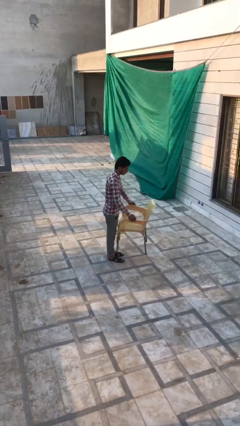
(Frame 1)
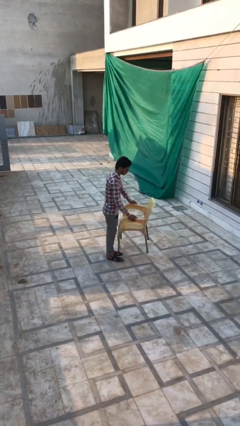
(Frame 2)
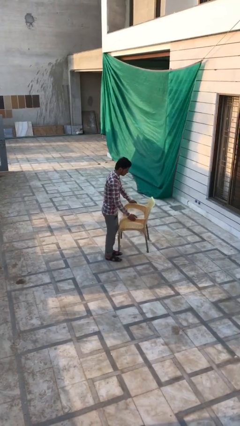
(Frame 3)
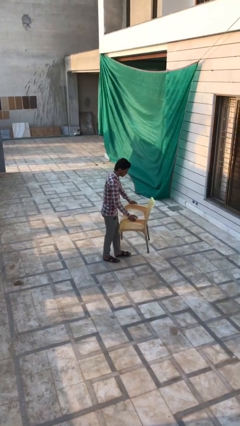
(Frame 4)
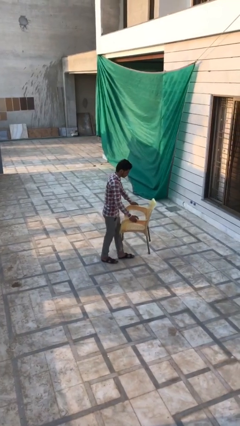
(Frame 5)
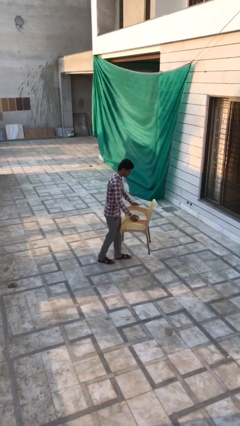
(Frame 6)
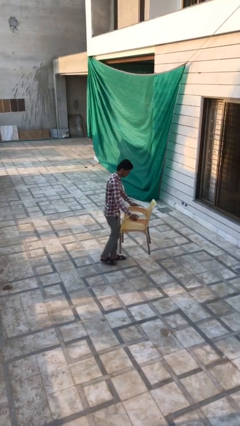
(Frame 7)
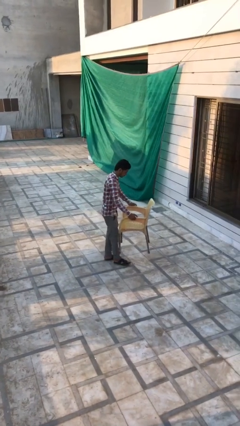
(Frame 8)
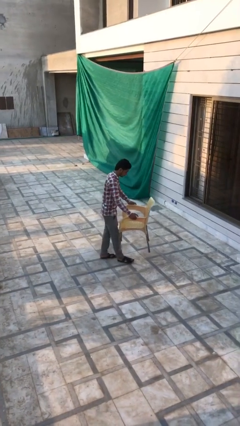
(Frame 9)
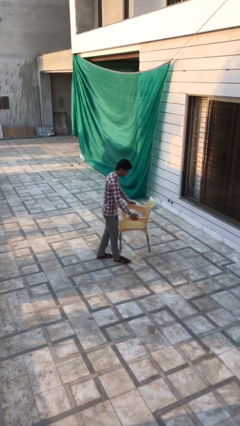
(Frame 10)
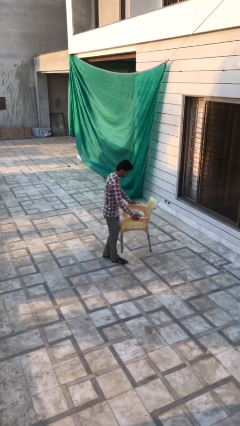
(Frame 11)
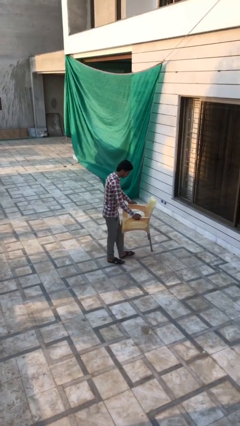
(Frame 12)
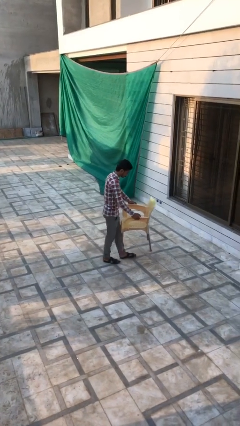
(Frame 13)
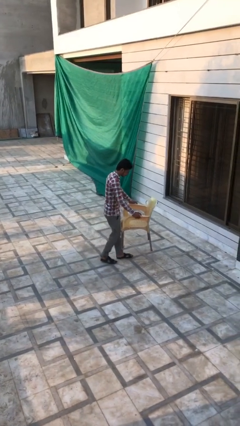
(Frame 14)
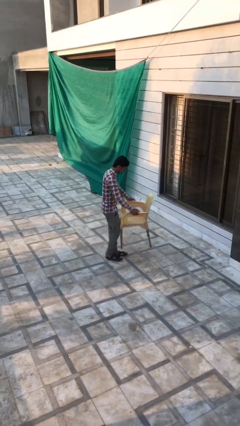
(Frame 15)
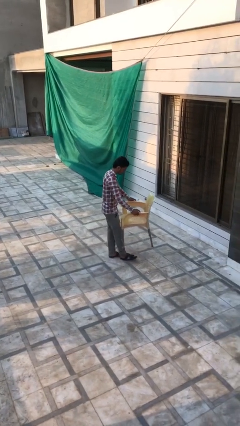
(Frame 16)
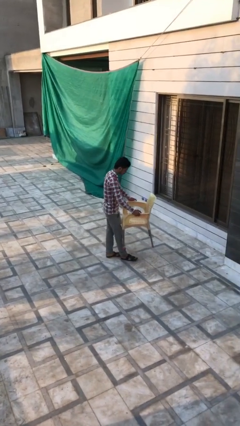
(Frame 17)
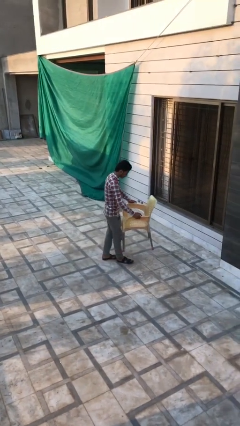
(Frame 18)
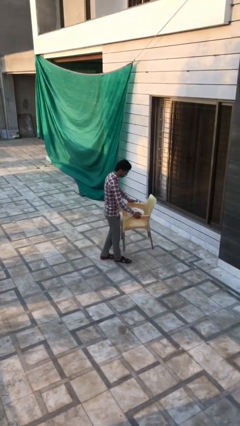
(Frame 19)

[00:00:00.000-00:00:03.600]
person carries heavy object

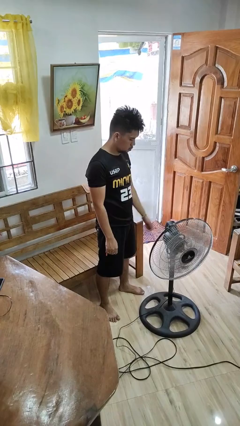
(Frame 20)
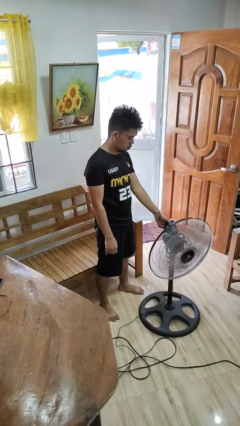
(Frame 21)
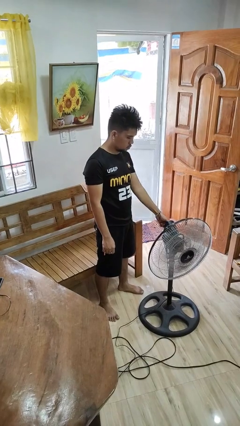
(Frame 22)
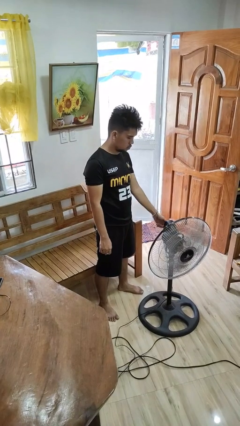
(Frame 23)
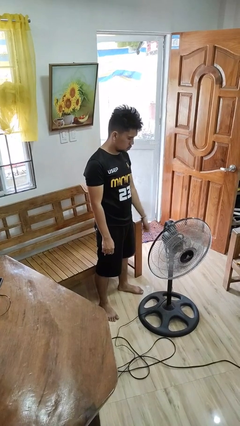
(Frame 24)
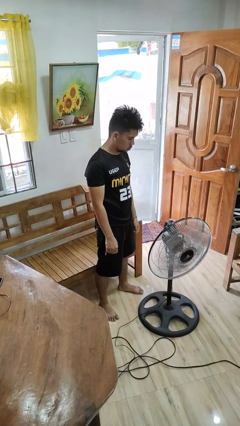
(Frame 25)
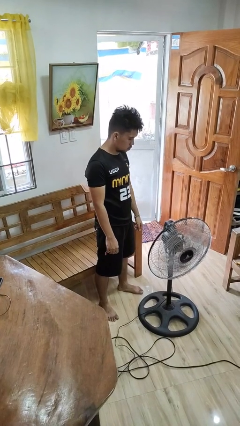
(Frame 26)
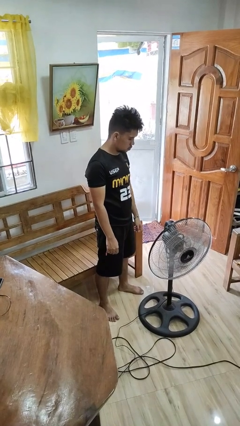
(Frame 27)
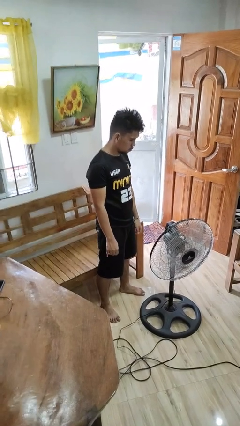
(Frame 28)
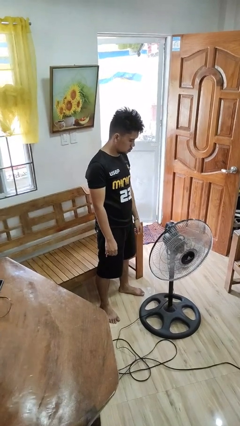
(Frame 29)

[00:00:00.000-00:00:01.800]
person turns on fan

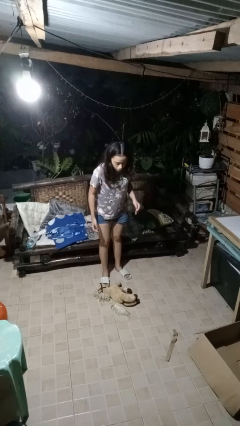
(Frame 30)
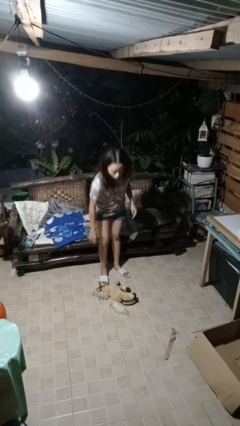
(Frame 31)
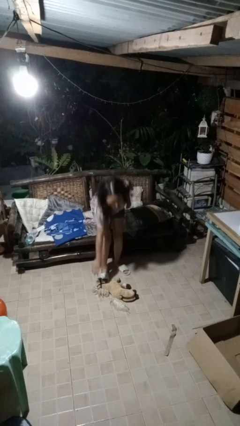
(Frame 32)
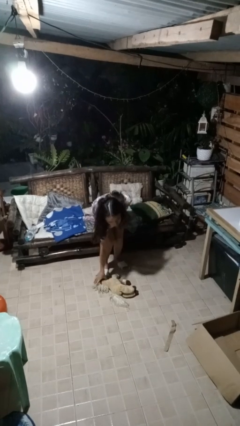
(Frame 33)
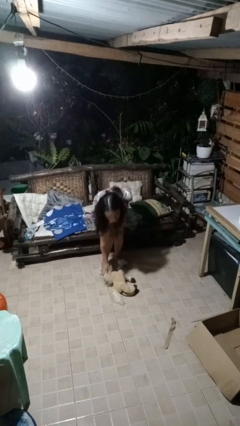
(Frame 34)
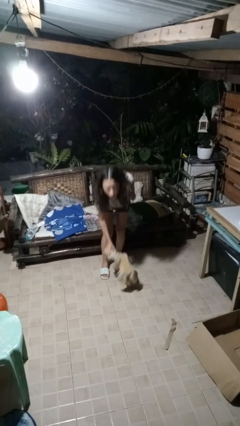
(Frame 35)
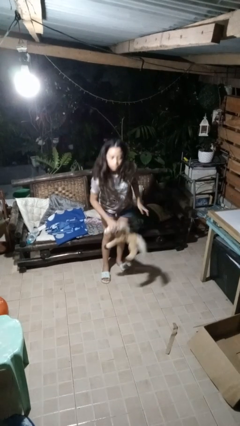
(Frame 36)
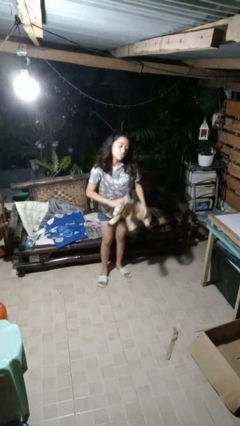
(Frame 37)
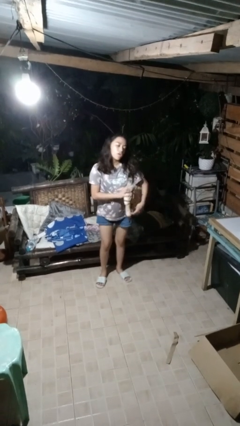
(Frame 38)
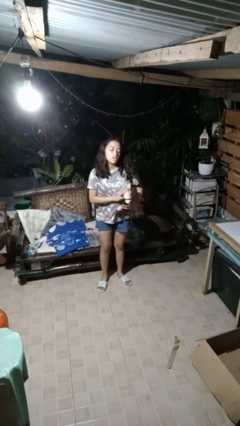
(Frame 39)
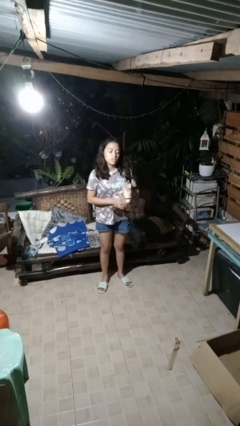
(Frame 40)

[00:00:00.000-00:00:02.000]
person picks up object from floor

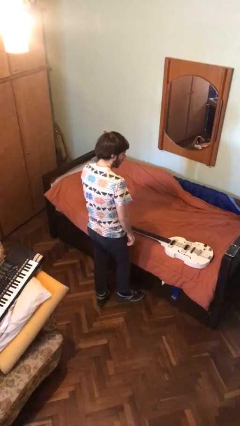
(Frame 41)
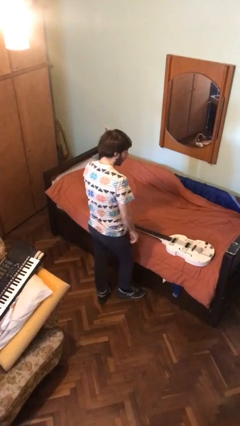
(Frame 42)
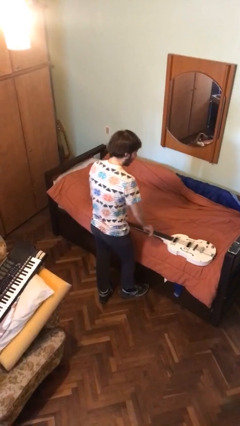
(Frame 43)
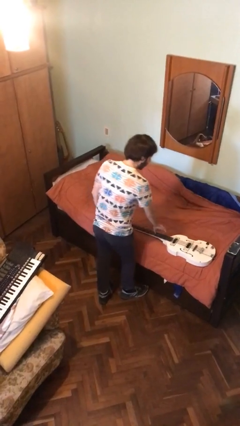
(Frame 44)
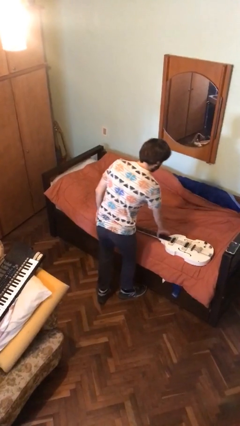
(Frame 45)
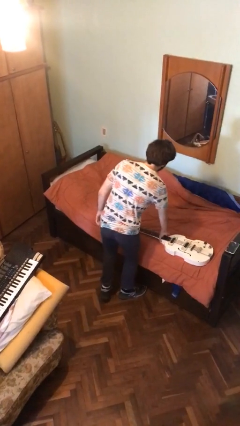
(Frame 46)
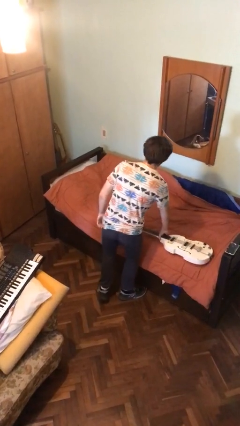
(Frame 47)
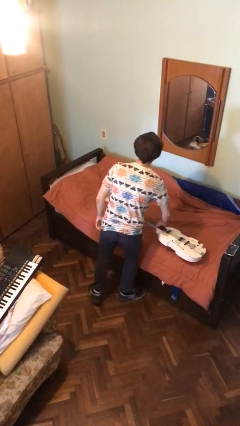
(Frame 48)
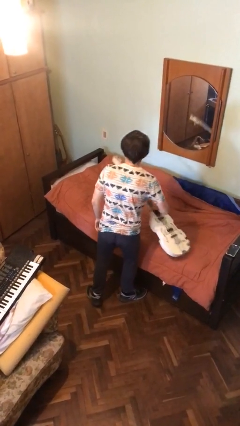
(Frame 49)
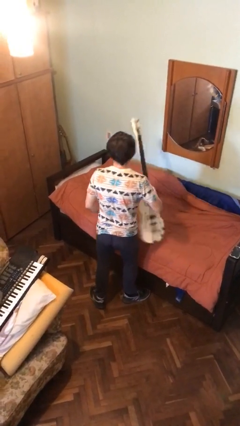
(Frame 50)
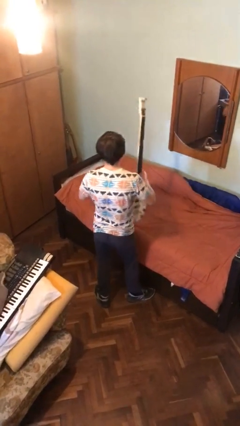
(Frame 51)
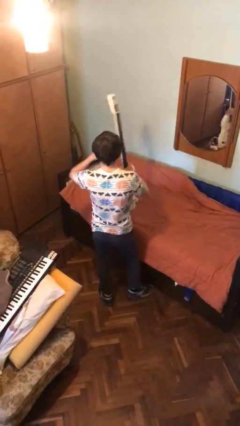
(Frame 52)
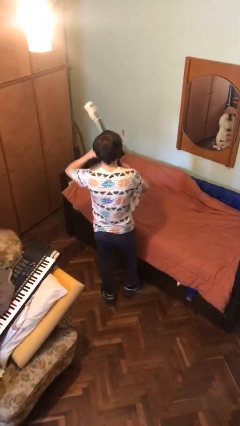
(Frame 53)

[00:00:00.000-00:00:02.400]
person picks up object from bed

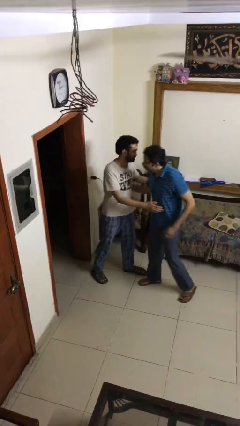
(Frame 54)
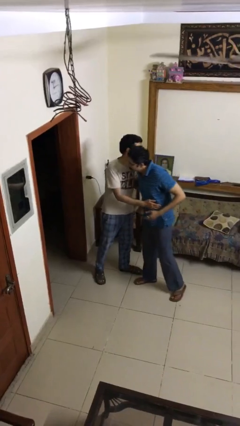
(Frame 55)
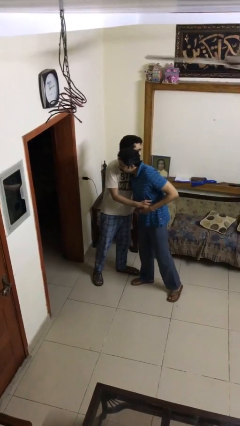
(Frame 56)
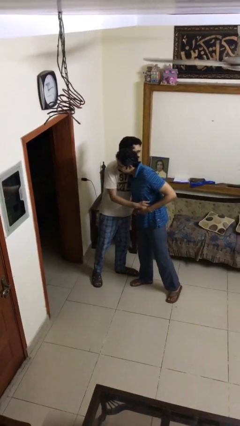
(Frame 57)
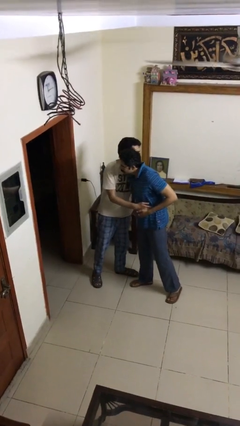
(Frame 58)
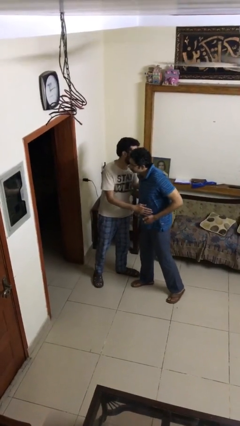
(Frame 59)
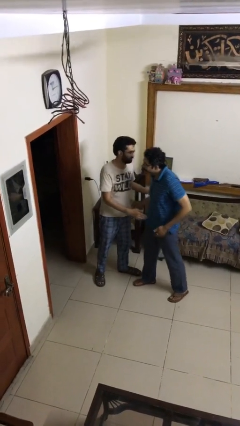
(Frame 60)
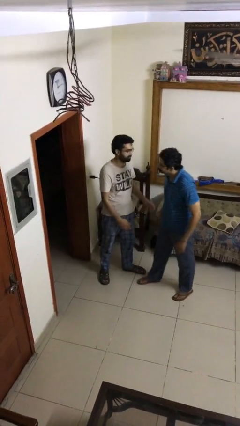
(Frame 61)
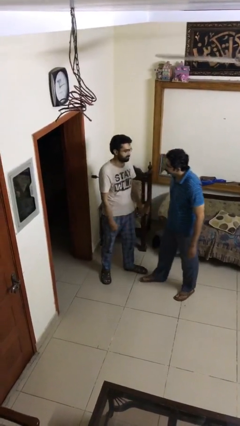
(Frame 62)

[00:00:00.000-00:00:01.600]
person embraces person

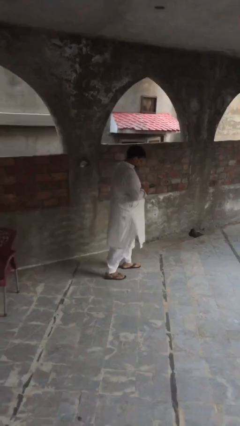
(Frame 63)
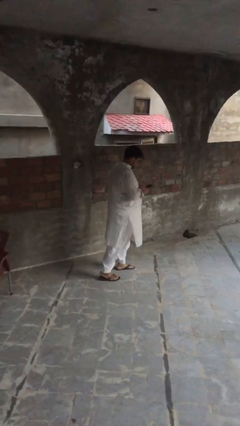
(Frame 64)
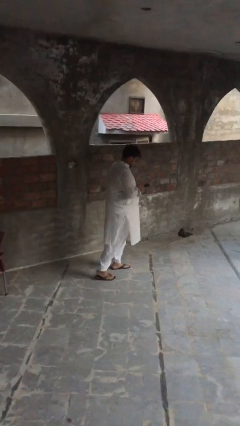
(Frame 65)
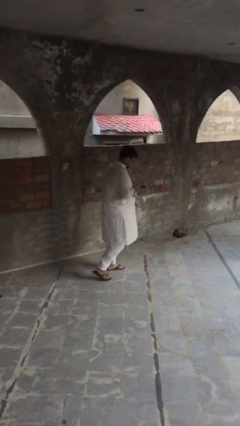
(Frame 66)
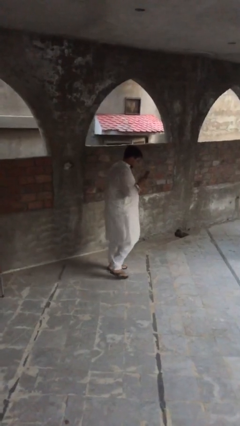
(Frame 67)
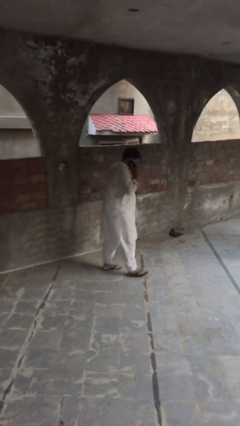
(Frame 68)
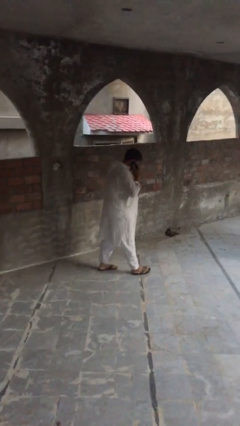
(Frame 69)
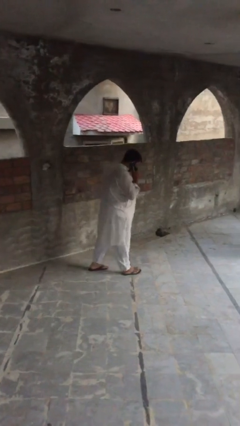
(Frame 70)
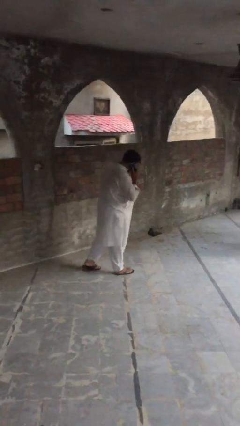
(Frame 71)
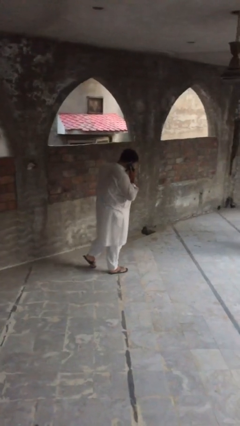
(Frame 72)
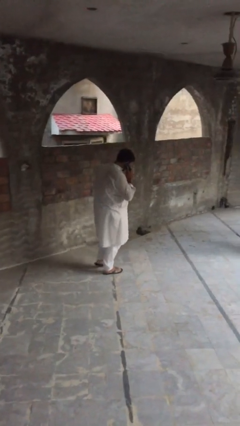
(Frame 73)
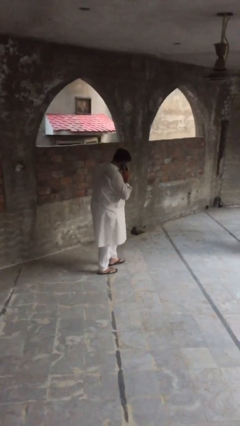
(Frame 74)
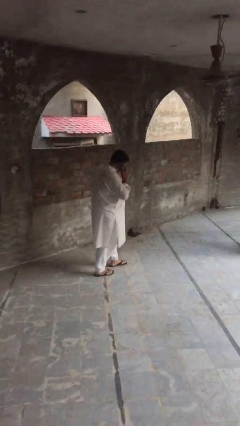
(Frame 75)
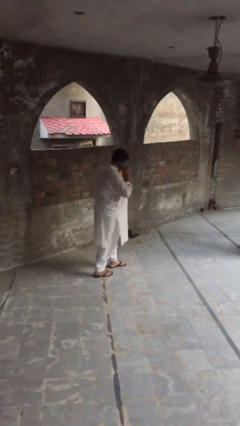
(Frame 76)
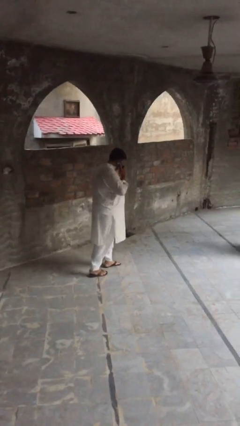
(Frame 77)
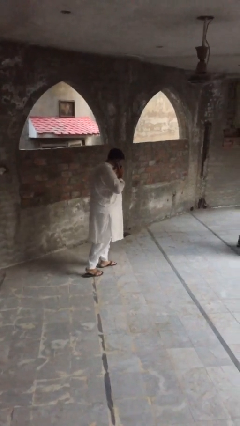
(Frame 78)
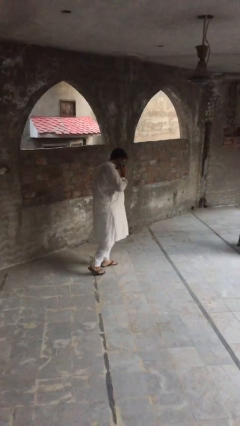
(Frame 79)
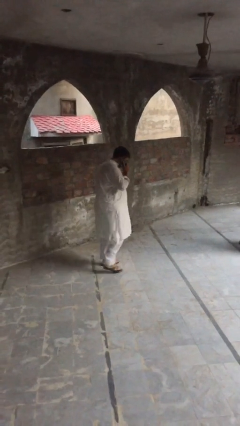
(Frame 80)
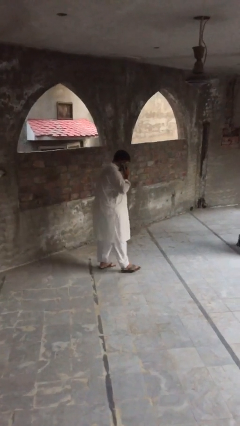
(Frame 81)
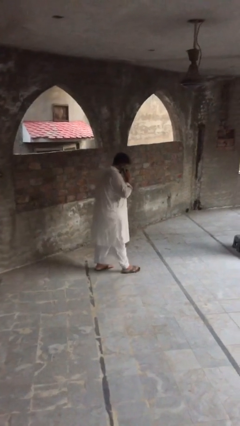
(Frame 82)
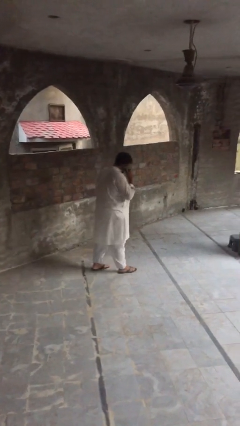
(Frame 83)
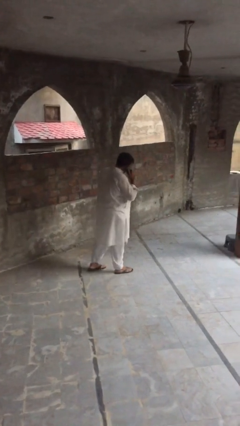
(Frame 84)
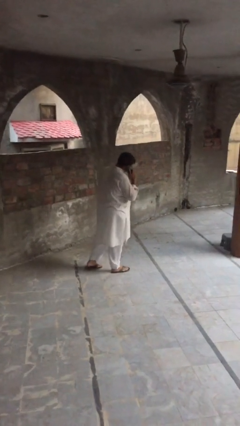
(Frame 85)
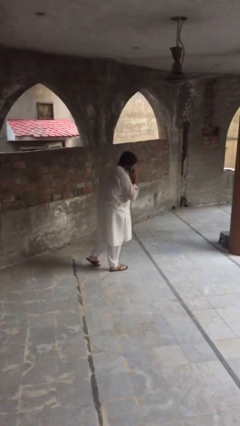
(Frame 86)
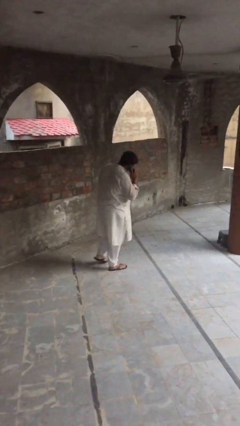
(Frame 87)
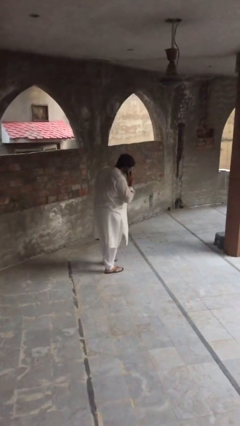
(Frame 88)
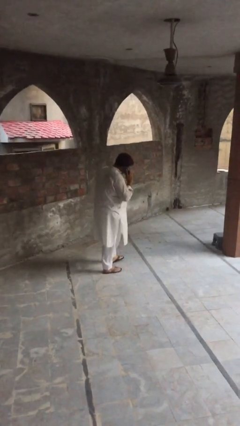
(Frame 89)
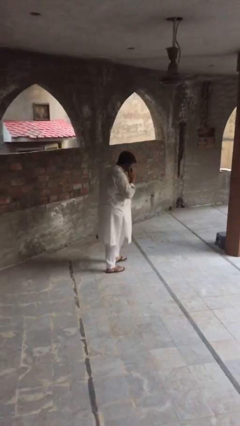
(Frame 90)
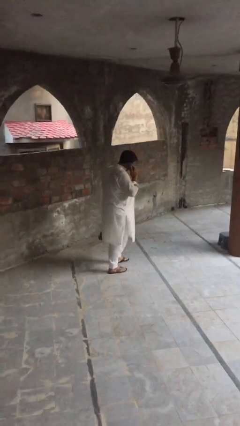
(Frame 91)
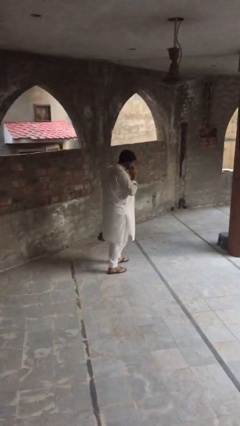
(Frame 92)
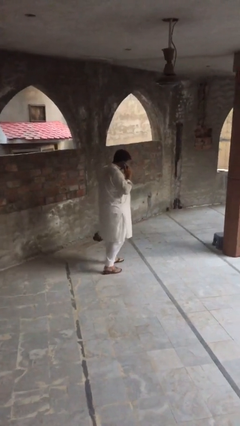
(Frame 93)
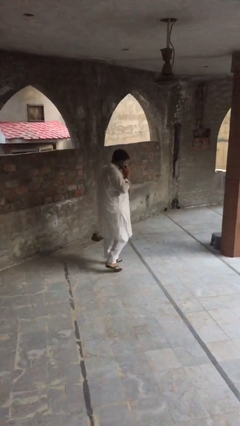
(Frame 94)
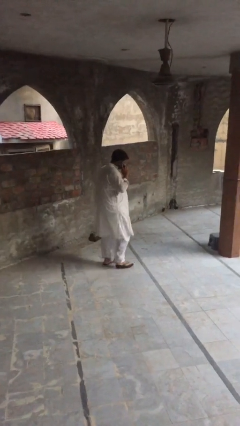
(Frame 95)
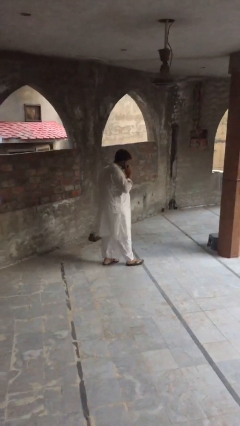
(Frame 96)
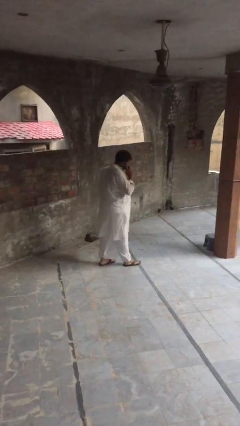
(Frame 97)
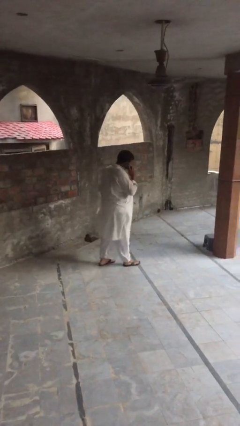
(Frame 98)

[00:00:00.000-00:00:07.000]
person talks on phone
